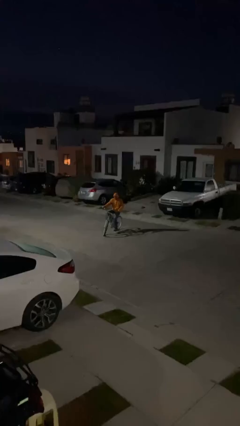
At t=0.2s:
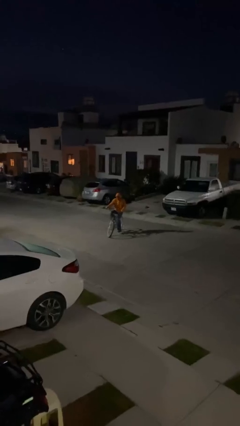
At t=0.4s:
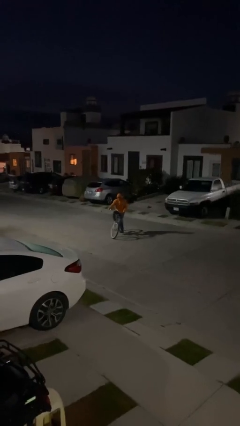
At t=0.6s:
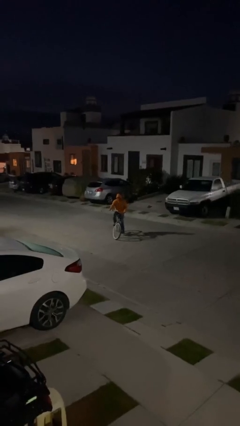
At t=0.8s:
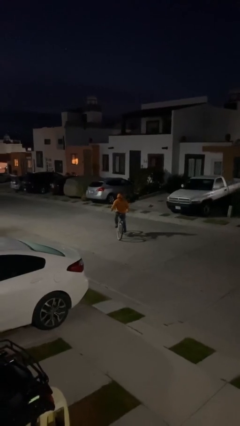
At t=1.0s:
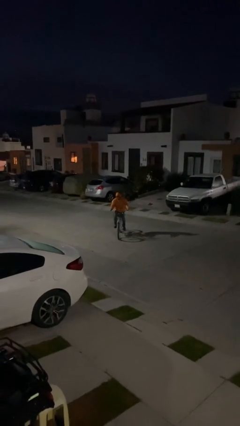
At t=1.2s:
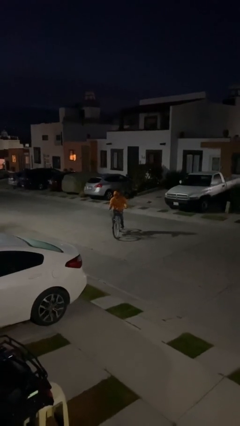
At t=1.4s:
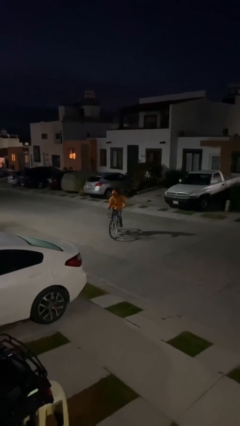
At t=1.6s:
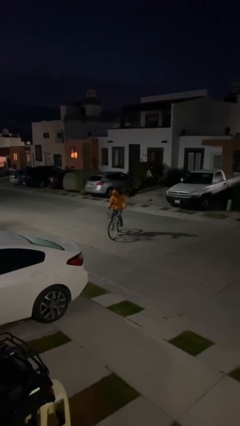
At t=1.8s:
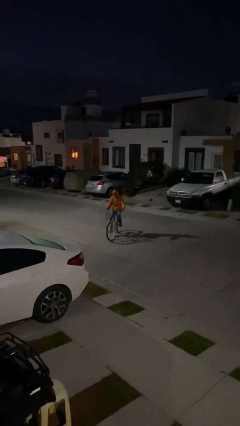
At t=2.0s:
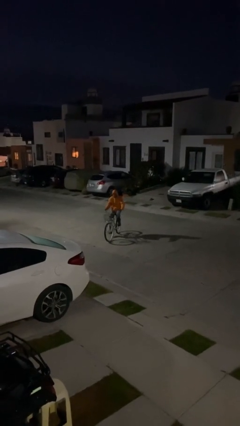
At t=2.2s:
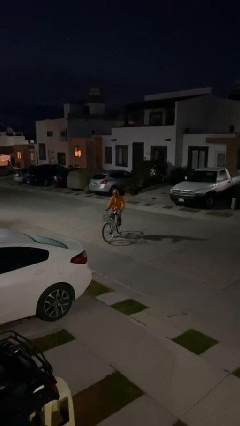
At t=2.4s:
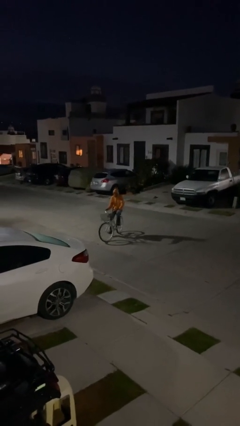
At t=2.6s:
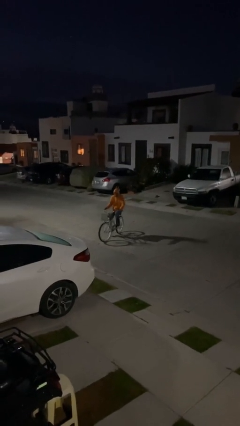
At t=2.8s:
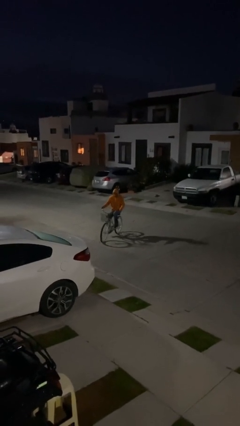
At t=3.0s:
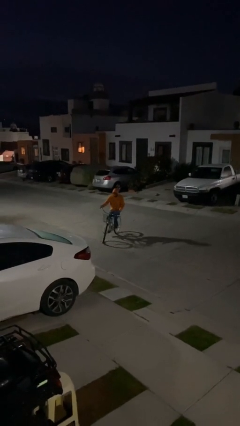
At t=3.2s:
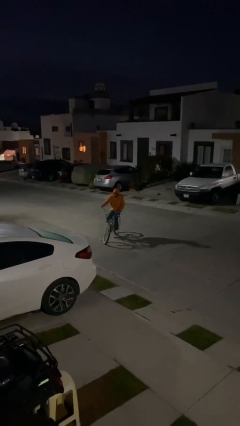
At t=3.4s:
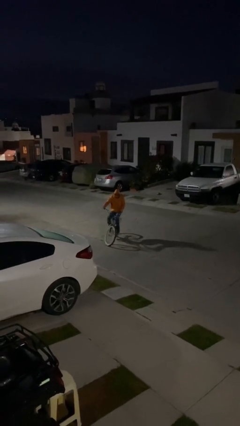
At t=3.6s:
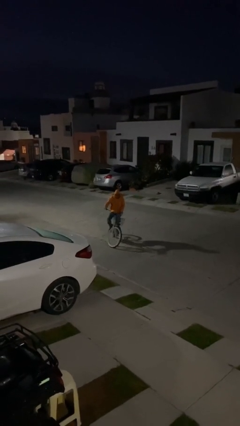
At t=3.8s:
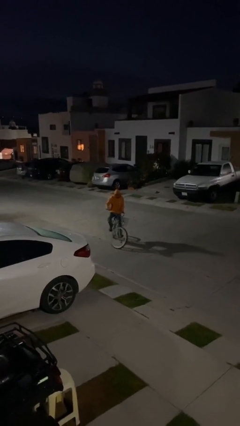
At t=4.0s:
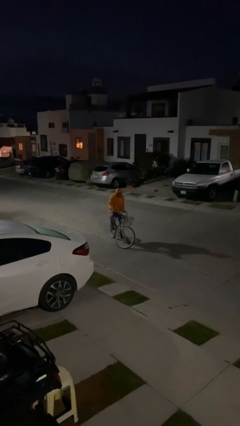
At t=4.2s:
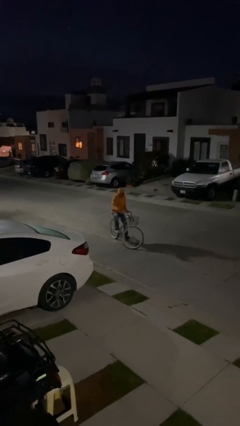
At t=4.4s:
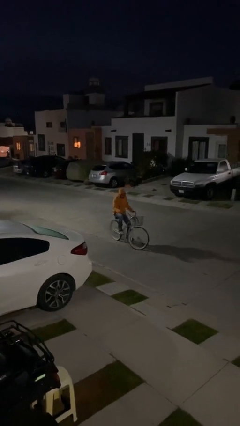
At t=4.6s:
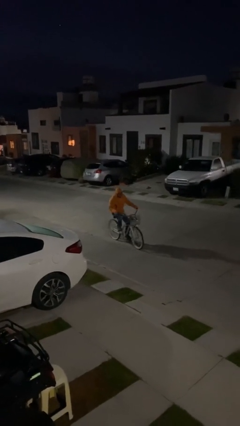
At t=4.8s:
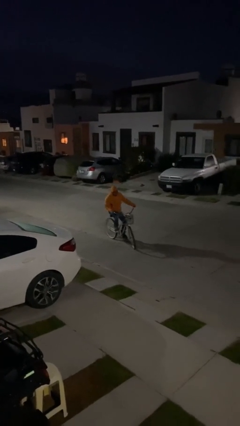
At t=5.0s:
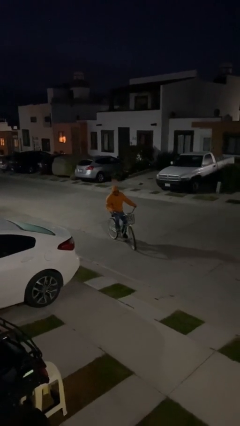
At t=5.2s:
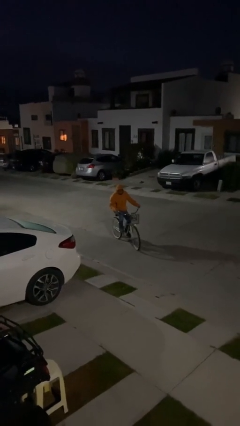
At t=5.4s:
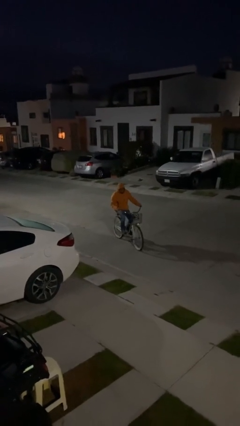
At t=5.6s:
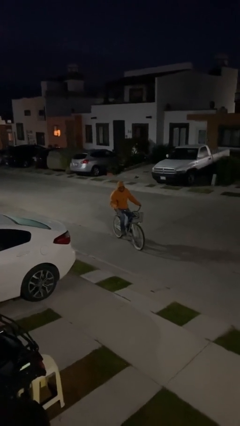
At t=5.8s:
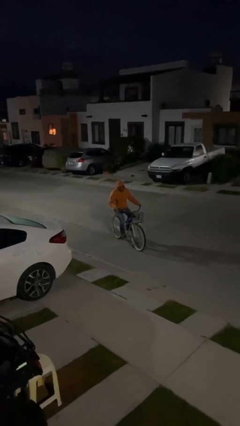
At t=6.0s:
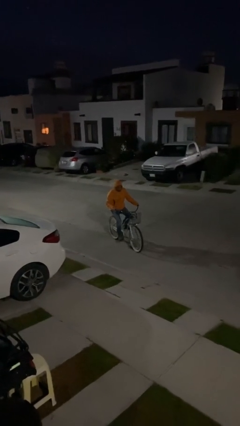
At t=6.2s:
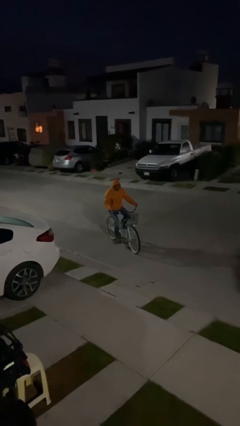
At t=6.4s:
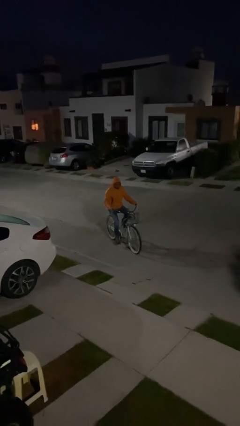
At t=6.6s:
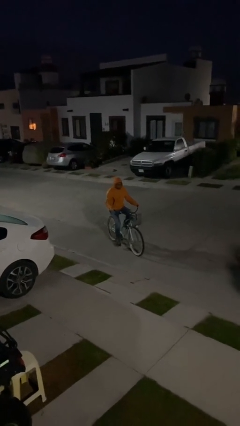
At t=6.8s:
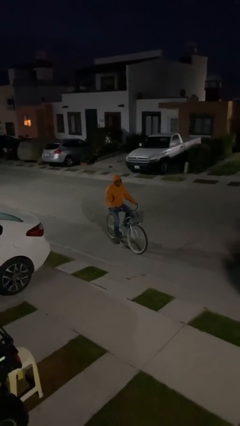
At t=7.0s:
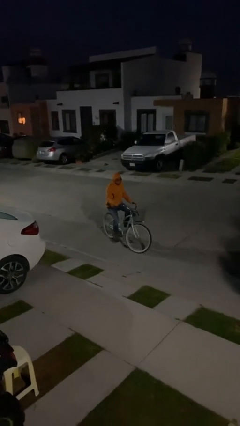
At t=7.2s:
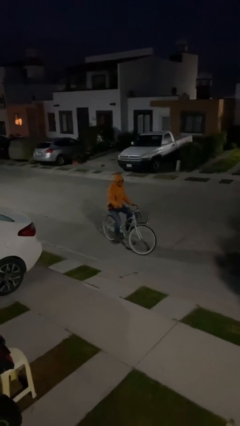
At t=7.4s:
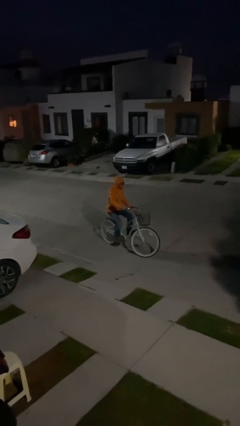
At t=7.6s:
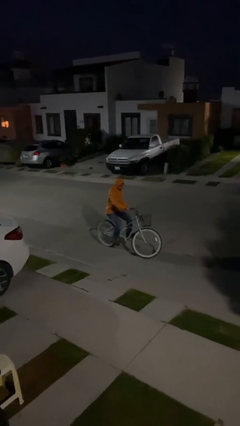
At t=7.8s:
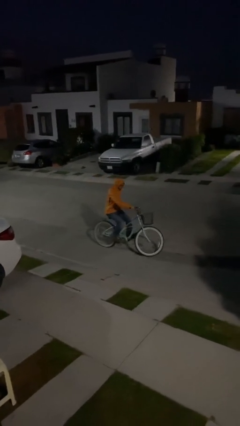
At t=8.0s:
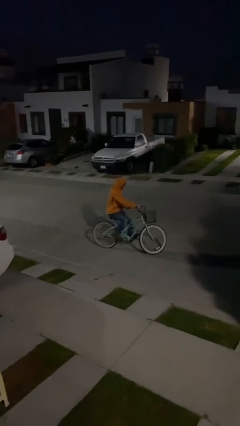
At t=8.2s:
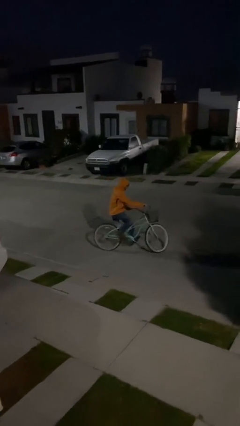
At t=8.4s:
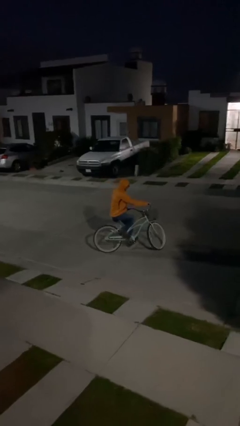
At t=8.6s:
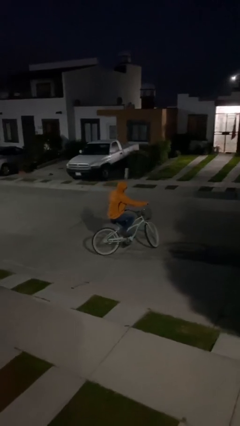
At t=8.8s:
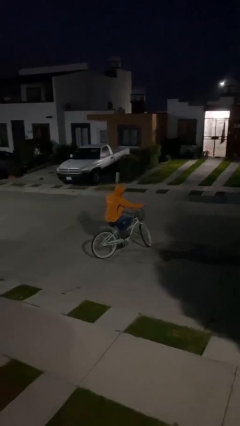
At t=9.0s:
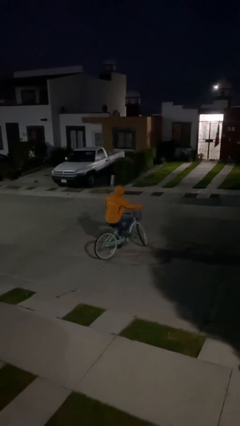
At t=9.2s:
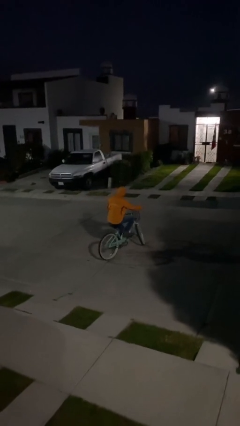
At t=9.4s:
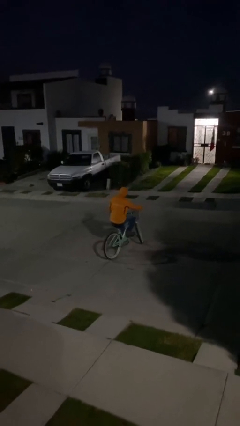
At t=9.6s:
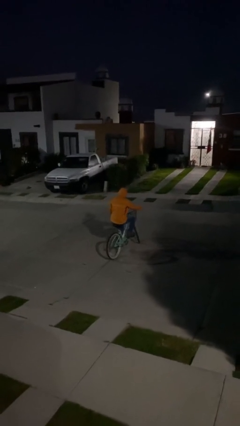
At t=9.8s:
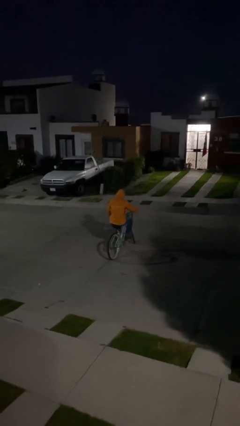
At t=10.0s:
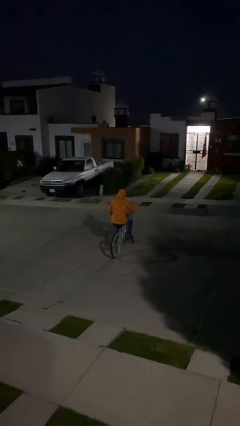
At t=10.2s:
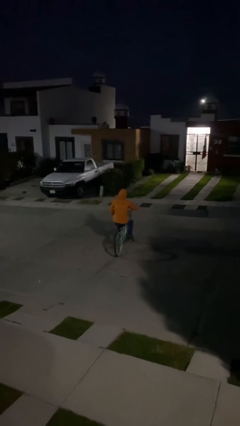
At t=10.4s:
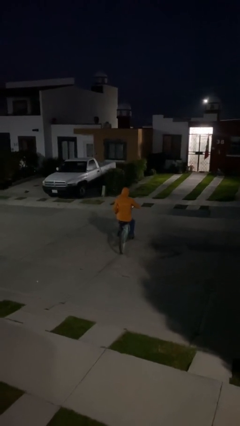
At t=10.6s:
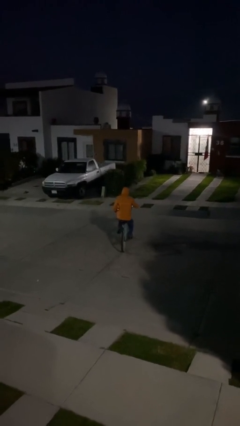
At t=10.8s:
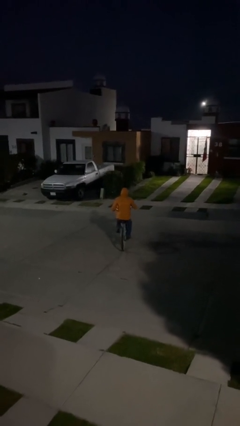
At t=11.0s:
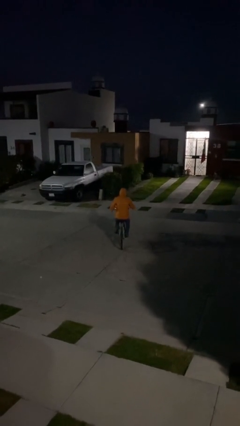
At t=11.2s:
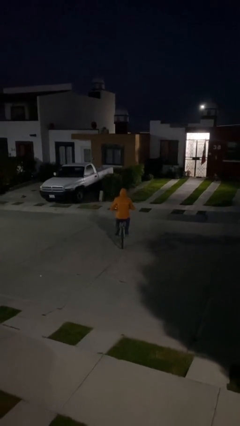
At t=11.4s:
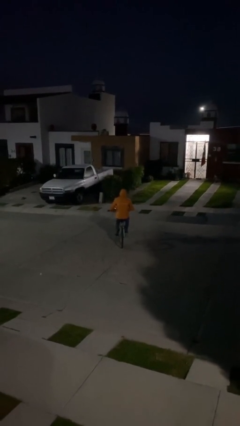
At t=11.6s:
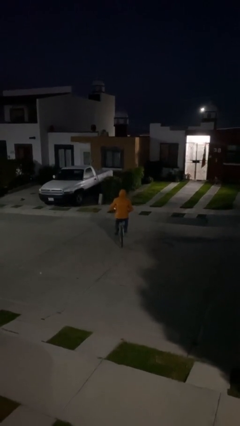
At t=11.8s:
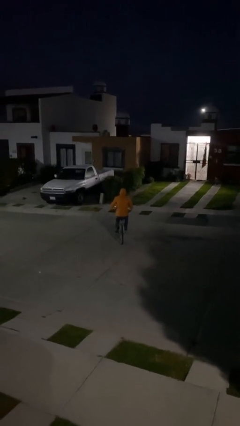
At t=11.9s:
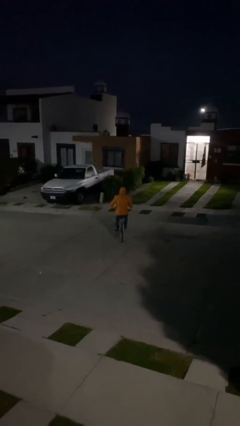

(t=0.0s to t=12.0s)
person rides bicycle

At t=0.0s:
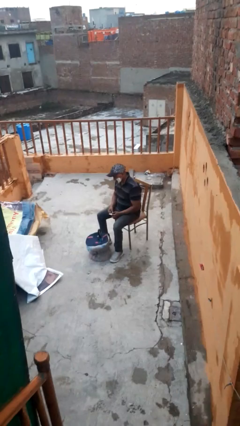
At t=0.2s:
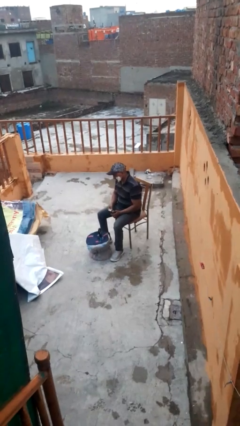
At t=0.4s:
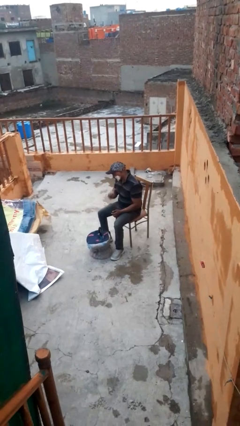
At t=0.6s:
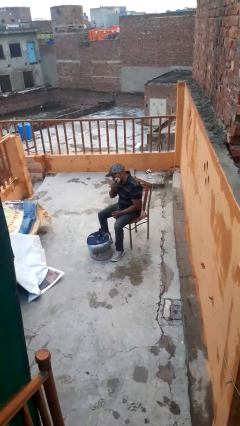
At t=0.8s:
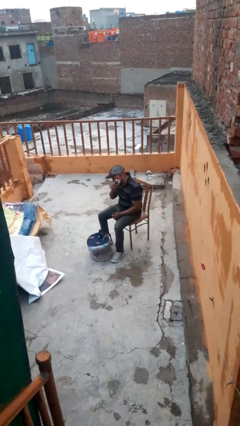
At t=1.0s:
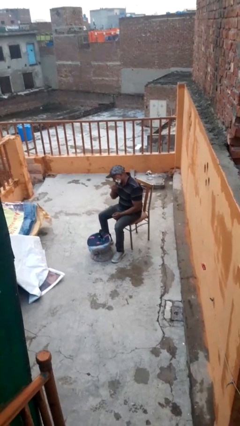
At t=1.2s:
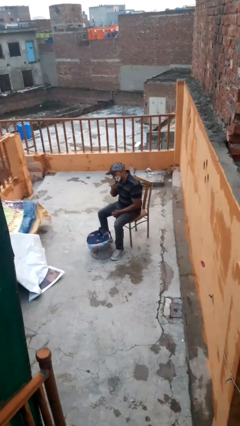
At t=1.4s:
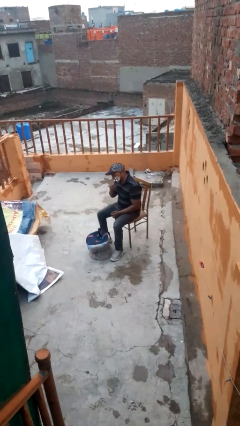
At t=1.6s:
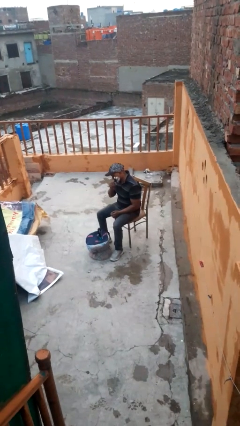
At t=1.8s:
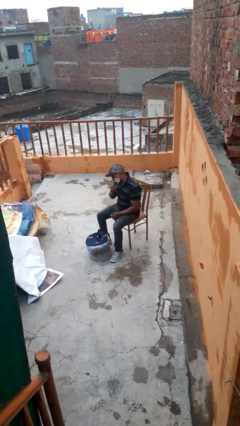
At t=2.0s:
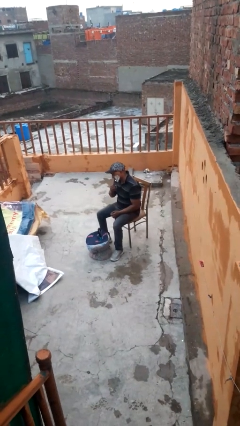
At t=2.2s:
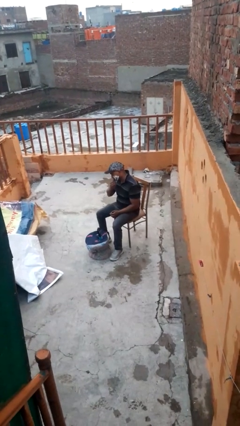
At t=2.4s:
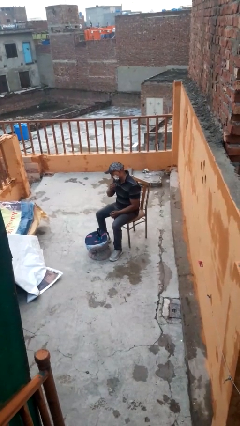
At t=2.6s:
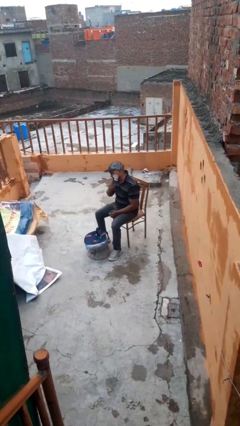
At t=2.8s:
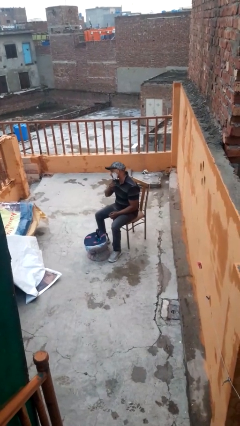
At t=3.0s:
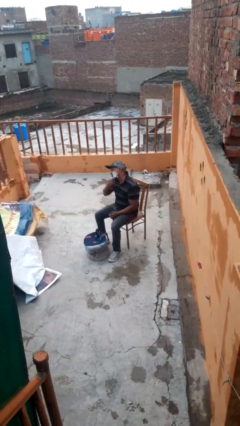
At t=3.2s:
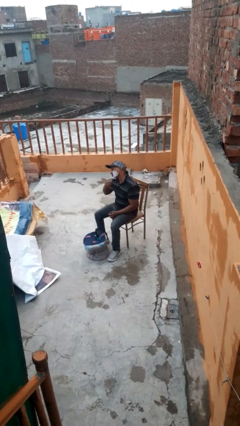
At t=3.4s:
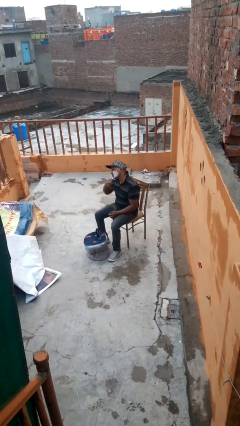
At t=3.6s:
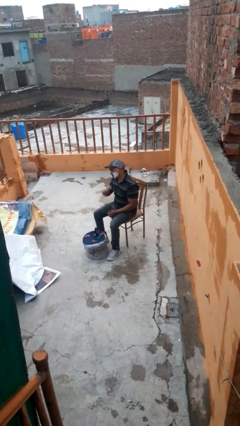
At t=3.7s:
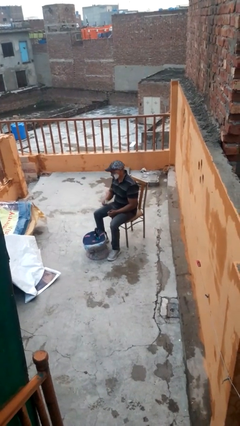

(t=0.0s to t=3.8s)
person shaves face

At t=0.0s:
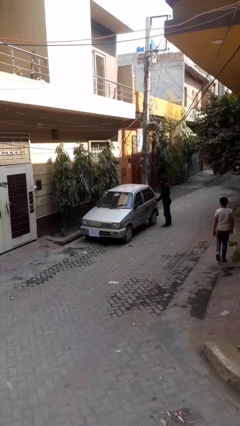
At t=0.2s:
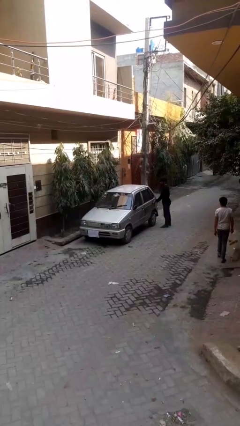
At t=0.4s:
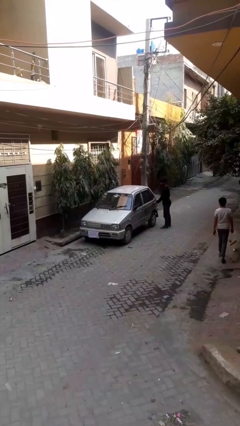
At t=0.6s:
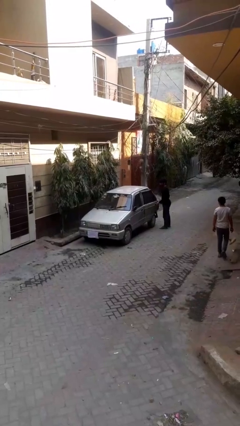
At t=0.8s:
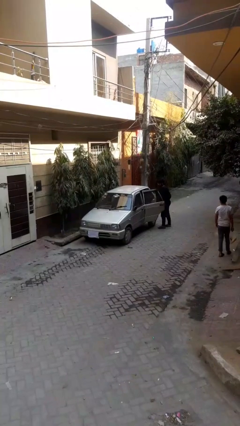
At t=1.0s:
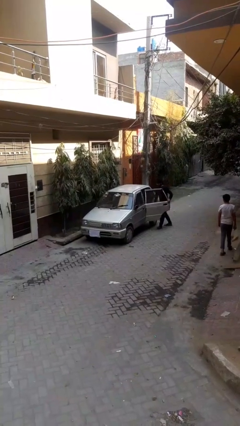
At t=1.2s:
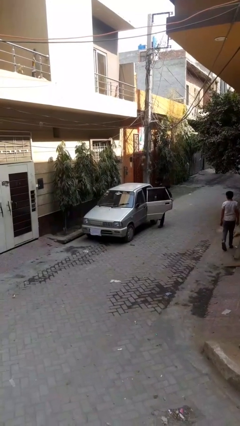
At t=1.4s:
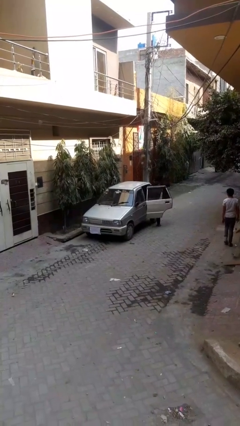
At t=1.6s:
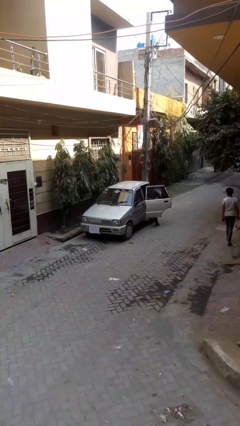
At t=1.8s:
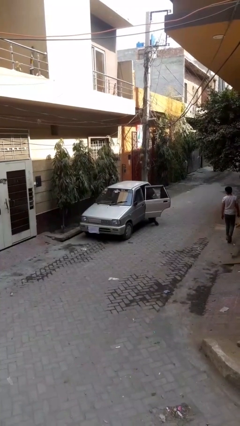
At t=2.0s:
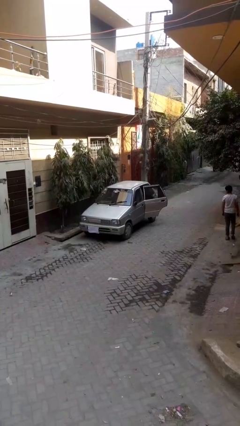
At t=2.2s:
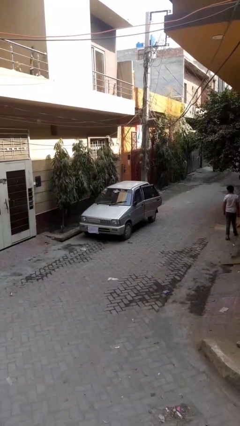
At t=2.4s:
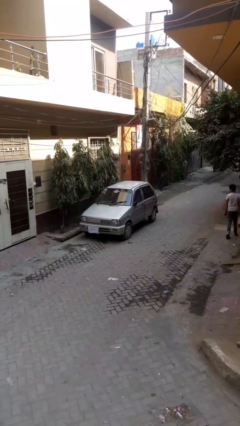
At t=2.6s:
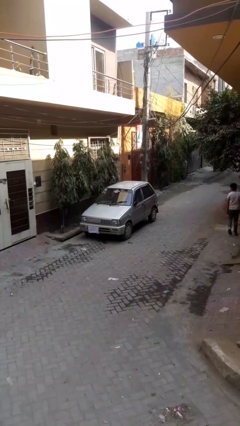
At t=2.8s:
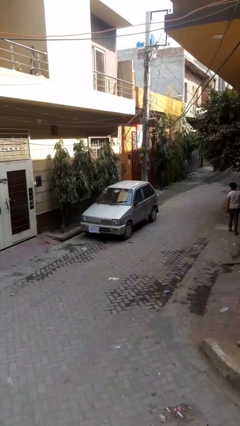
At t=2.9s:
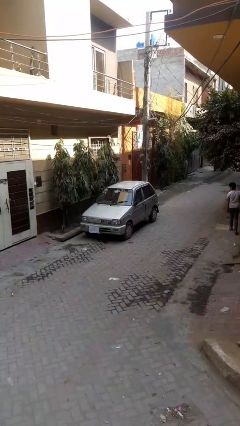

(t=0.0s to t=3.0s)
car picks up person
